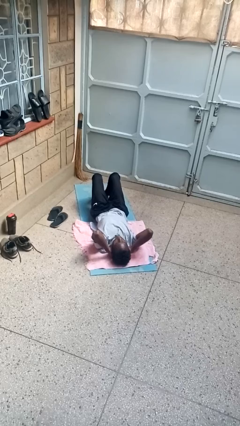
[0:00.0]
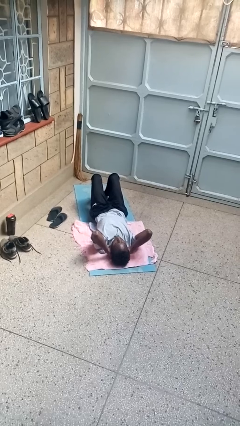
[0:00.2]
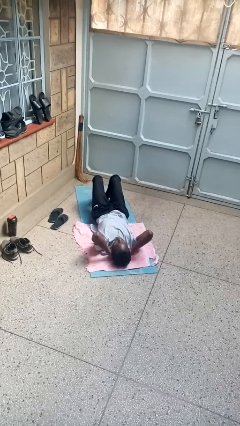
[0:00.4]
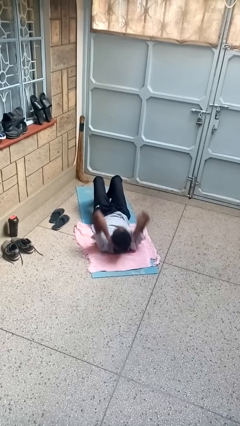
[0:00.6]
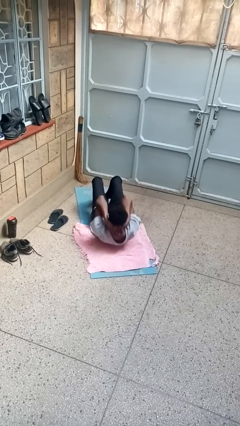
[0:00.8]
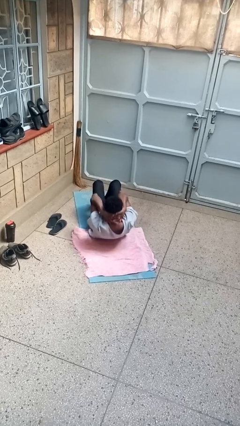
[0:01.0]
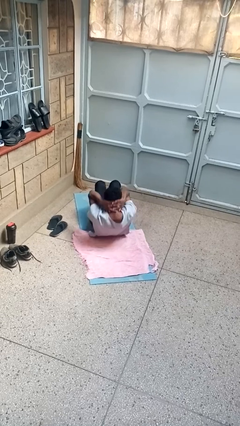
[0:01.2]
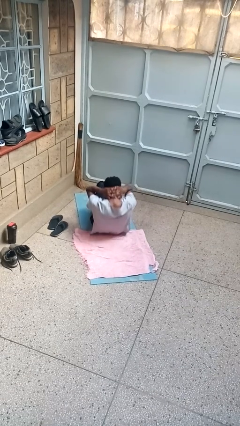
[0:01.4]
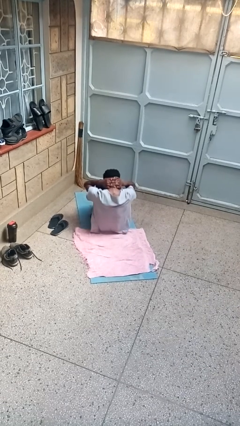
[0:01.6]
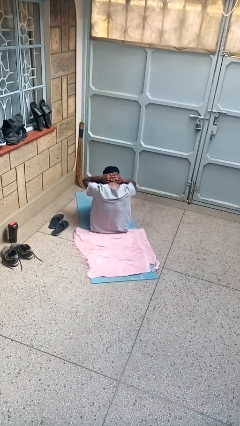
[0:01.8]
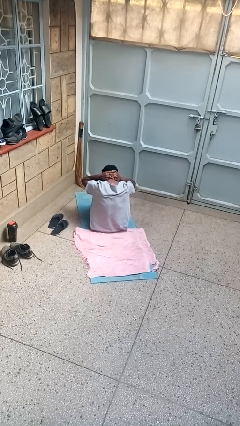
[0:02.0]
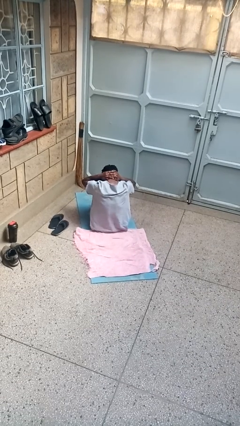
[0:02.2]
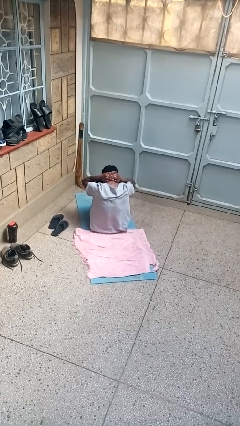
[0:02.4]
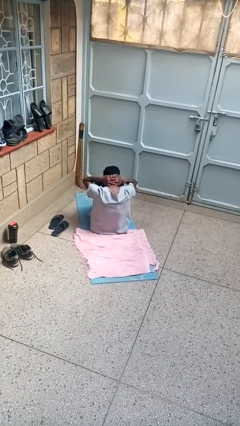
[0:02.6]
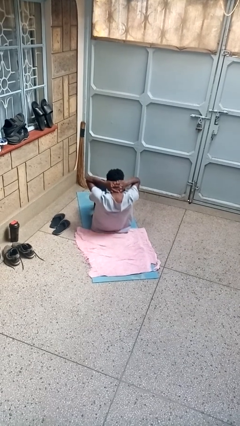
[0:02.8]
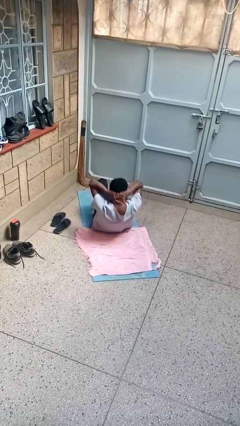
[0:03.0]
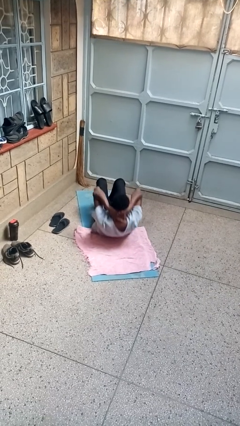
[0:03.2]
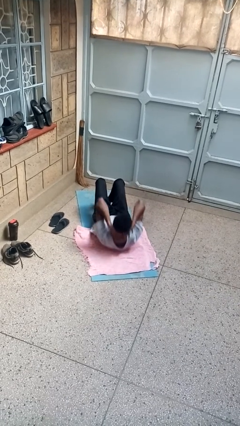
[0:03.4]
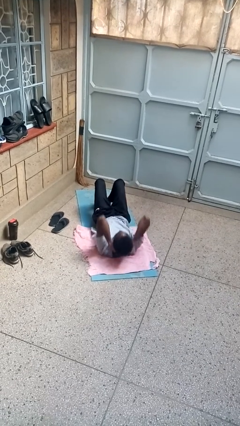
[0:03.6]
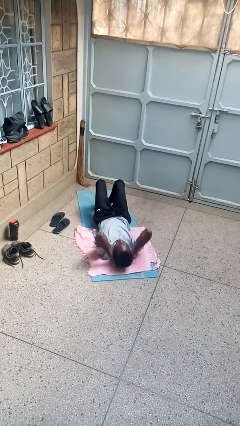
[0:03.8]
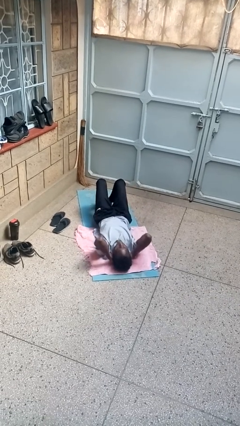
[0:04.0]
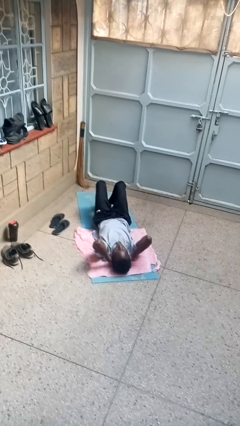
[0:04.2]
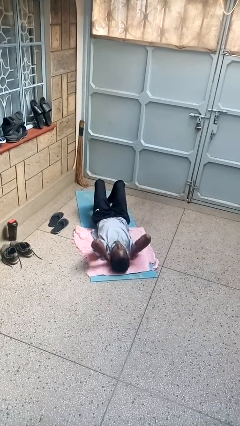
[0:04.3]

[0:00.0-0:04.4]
person exercises with situp

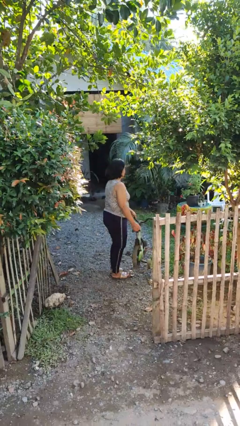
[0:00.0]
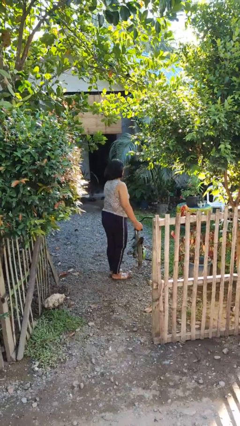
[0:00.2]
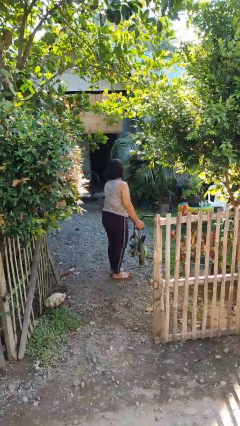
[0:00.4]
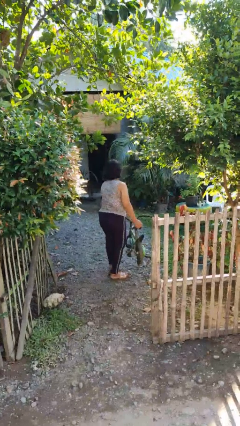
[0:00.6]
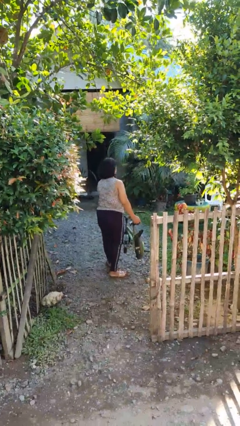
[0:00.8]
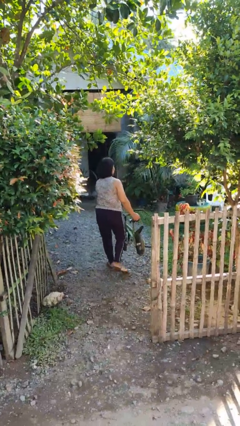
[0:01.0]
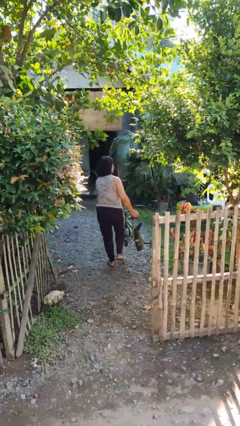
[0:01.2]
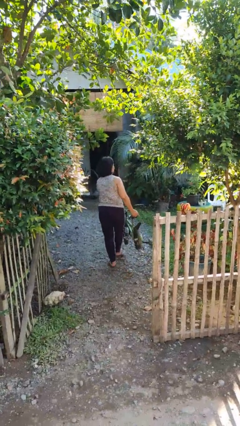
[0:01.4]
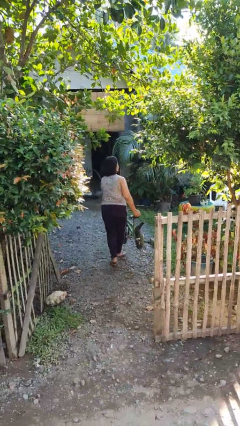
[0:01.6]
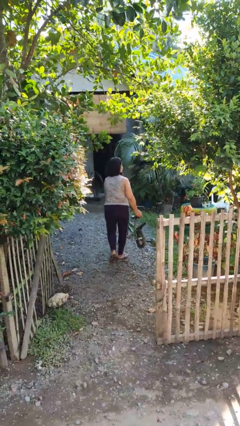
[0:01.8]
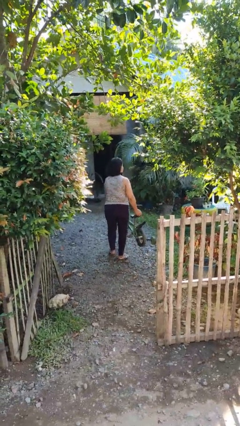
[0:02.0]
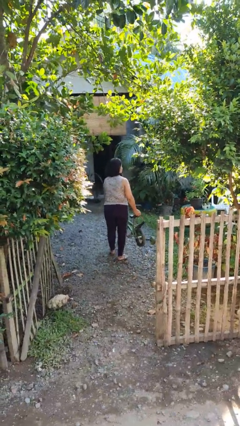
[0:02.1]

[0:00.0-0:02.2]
person carries bicycle

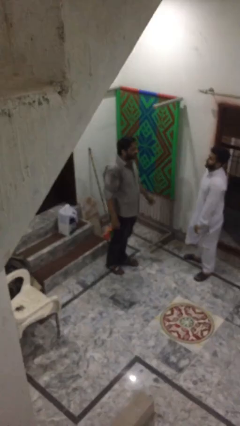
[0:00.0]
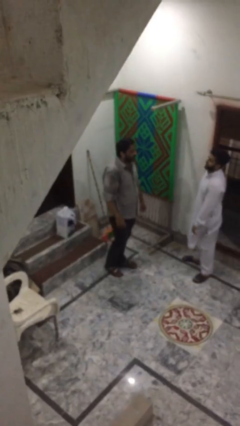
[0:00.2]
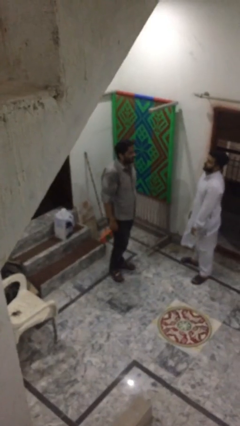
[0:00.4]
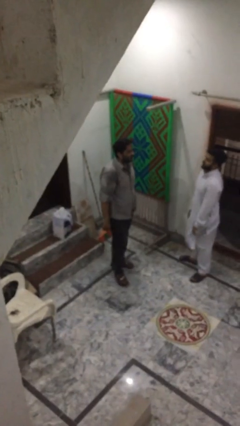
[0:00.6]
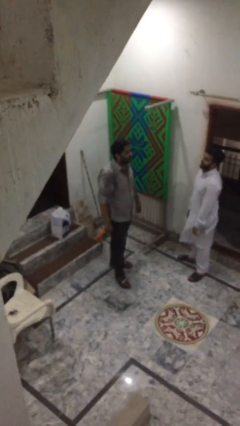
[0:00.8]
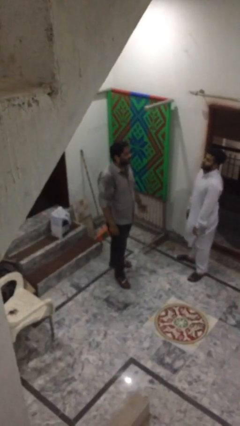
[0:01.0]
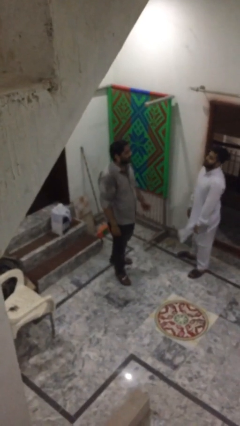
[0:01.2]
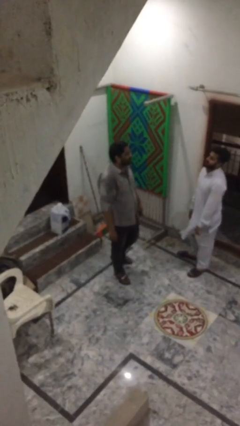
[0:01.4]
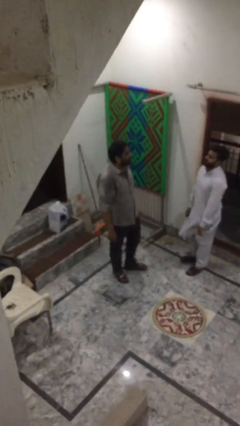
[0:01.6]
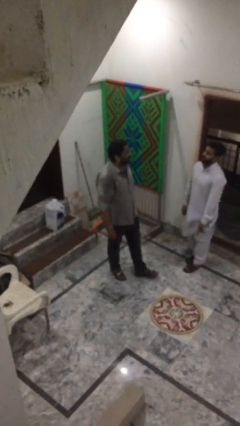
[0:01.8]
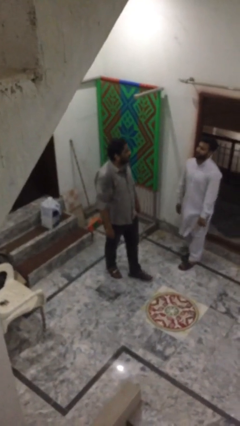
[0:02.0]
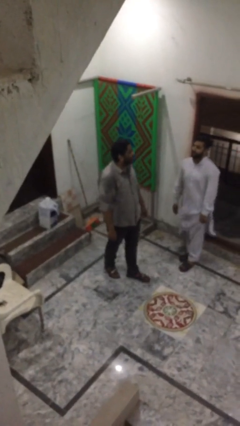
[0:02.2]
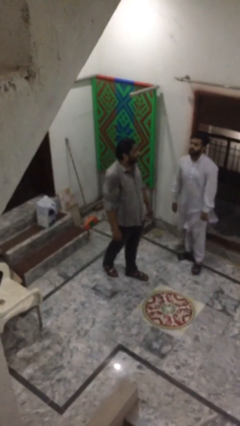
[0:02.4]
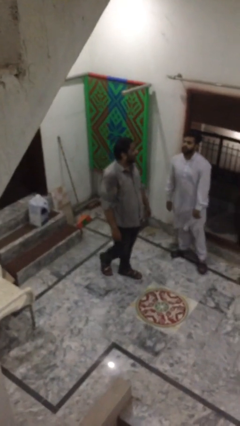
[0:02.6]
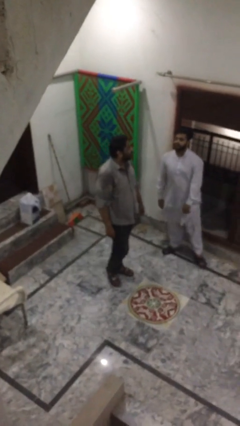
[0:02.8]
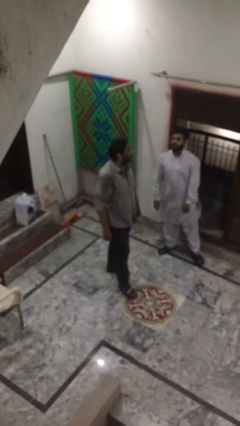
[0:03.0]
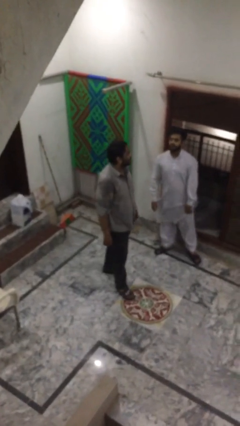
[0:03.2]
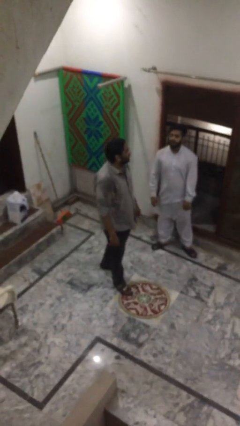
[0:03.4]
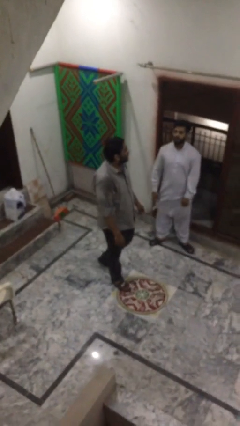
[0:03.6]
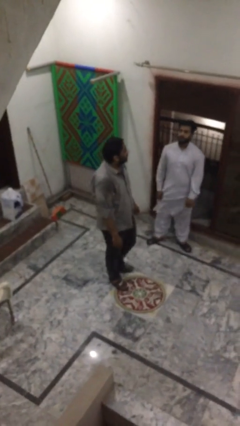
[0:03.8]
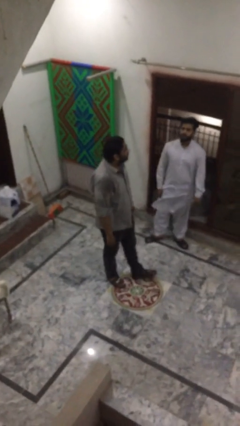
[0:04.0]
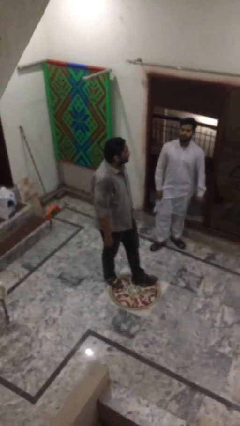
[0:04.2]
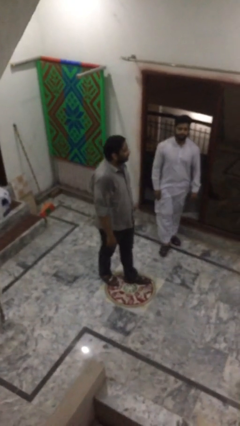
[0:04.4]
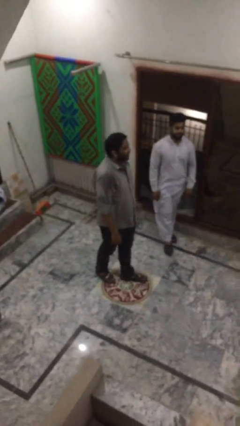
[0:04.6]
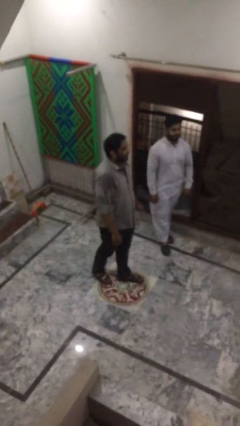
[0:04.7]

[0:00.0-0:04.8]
person talks to person

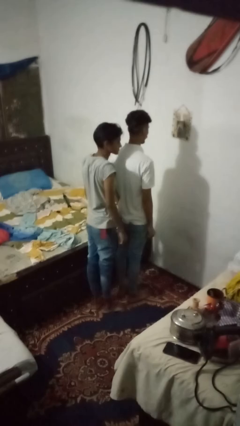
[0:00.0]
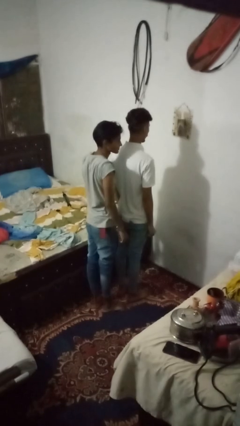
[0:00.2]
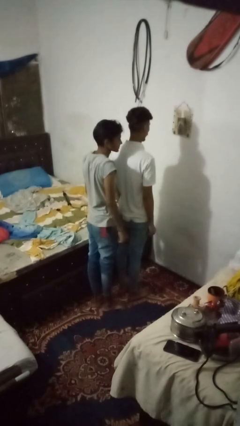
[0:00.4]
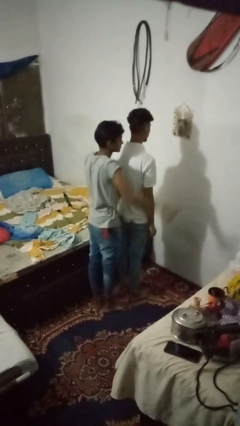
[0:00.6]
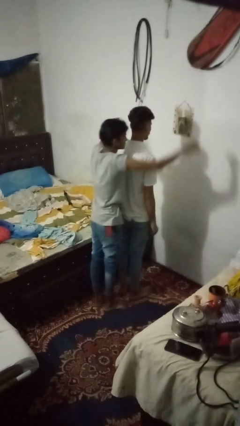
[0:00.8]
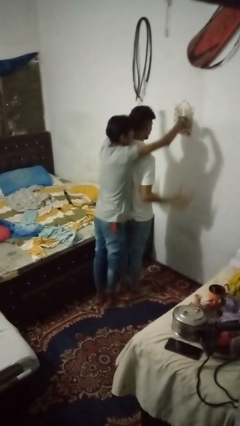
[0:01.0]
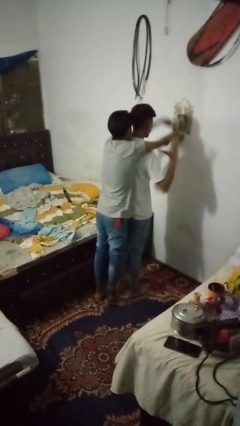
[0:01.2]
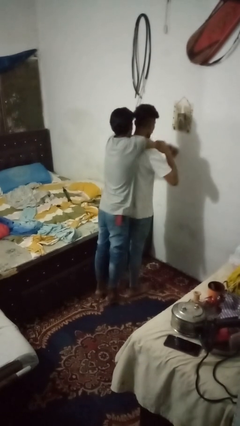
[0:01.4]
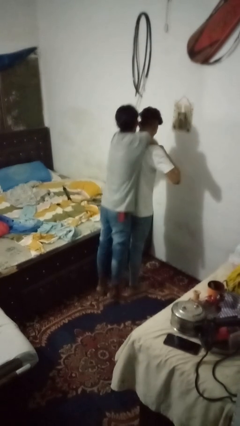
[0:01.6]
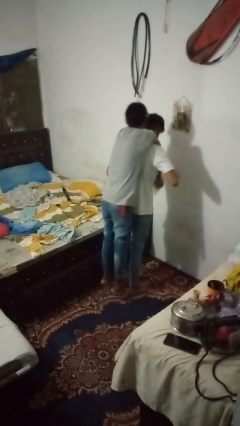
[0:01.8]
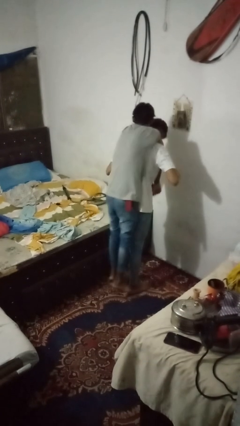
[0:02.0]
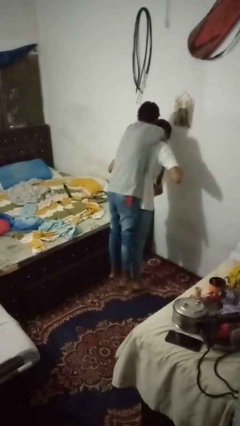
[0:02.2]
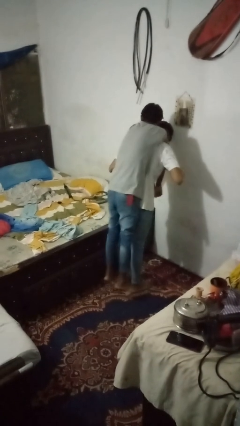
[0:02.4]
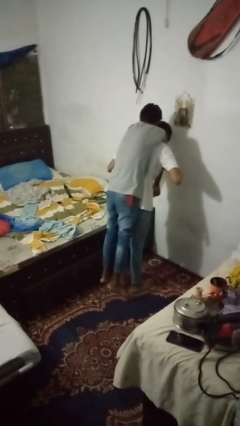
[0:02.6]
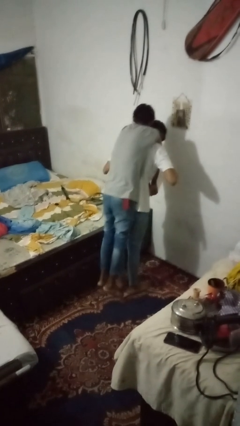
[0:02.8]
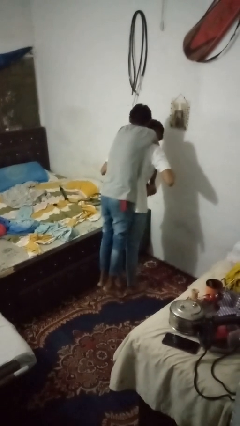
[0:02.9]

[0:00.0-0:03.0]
person carries person on back

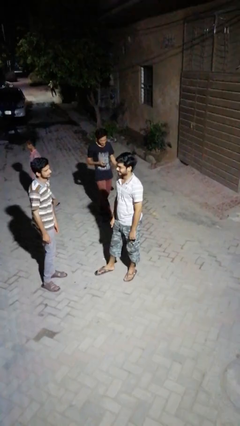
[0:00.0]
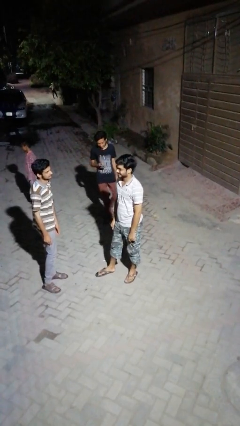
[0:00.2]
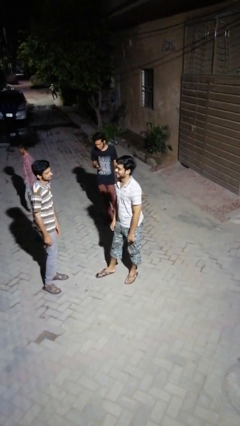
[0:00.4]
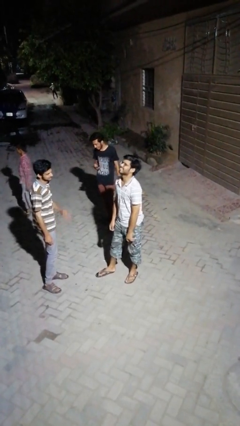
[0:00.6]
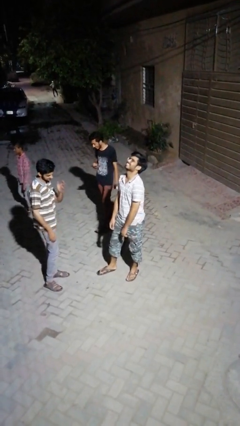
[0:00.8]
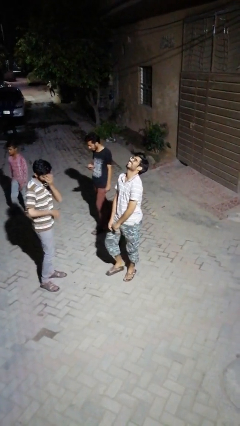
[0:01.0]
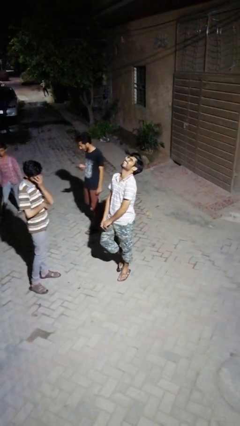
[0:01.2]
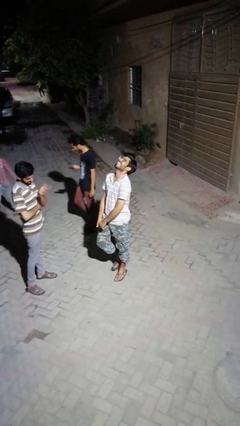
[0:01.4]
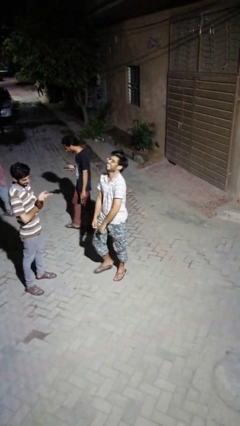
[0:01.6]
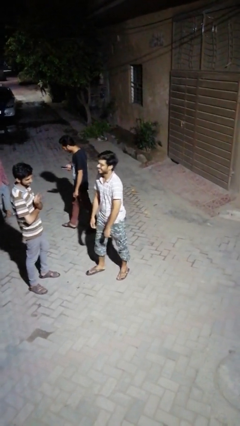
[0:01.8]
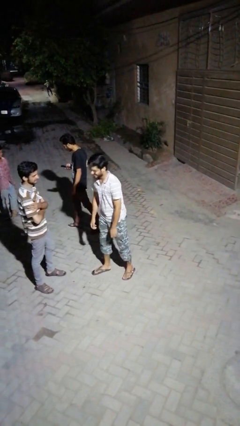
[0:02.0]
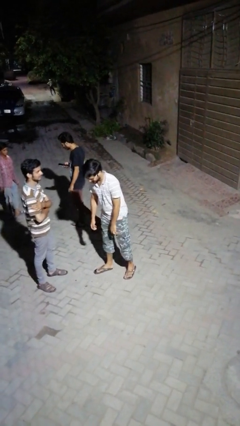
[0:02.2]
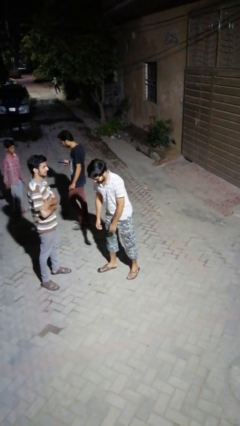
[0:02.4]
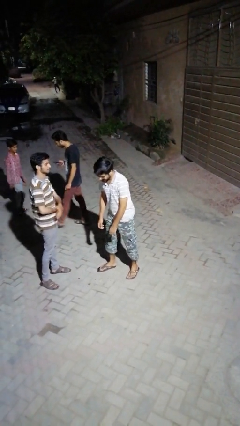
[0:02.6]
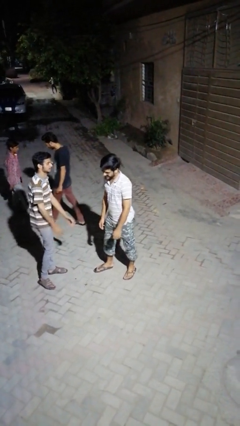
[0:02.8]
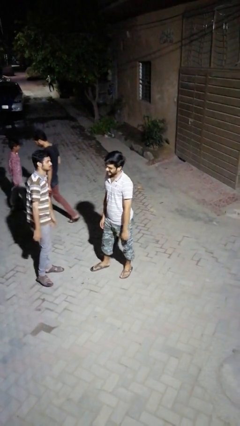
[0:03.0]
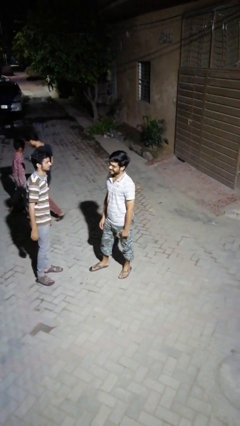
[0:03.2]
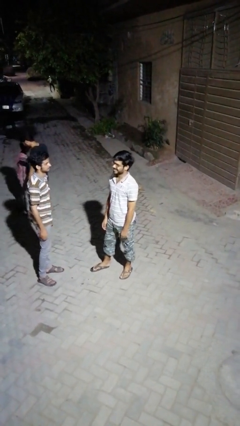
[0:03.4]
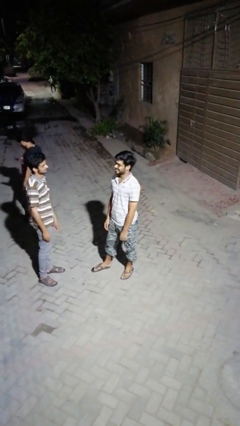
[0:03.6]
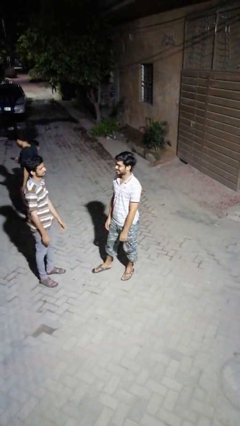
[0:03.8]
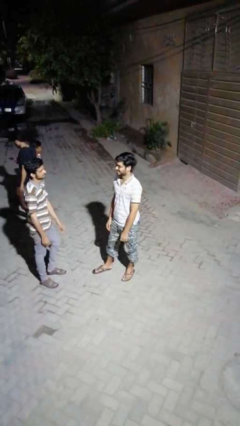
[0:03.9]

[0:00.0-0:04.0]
person laughs with person
